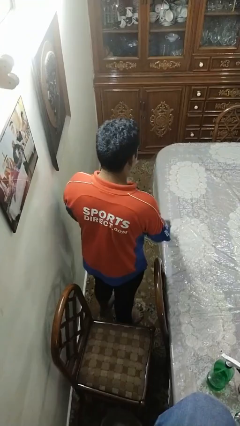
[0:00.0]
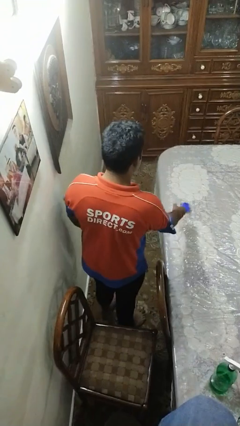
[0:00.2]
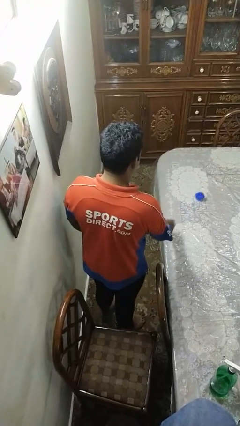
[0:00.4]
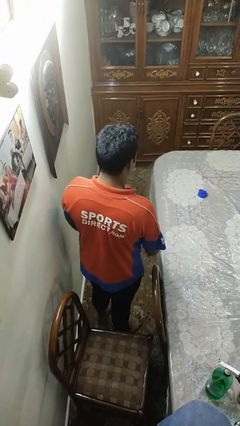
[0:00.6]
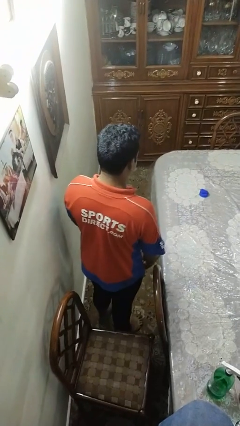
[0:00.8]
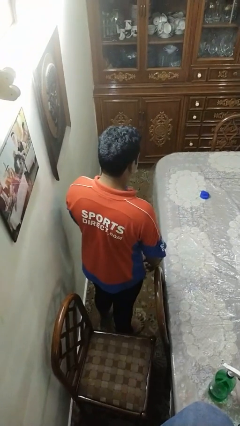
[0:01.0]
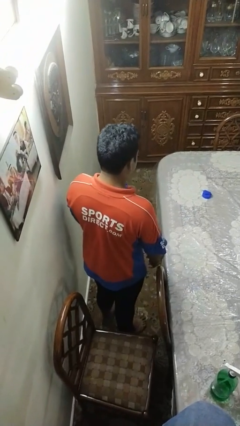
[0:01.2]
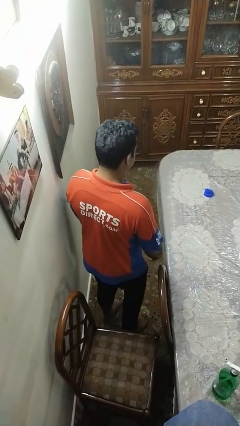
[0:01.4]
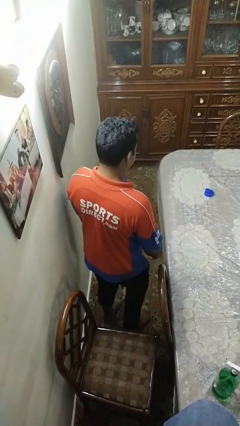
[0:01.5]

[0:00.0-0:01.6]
person throws object on table

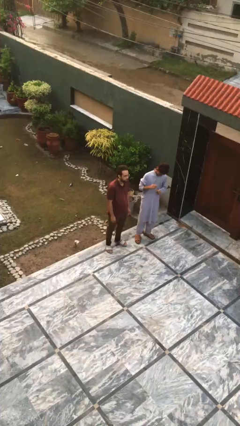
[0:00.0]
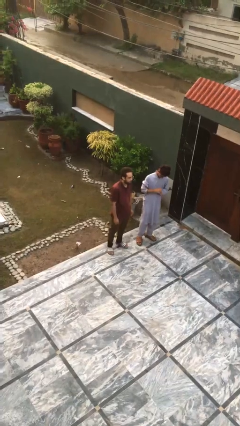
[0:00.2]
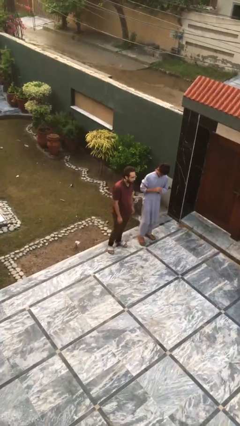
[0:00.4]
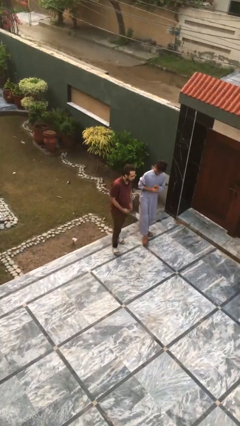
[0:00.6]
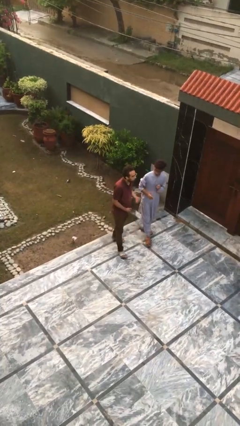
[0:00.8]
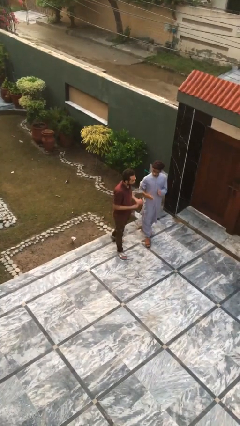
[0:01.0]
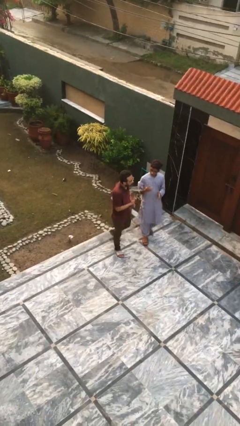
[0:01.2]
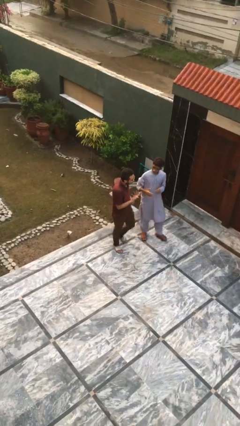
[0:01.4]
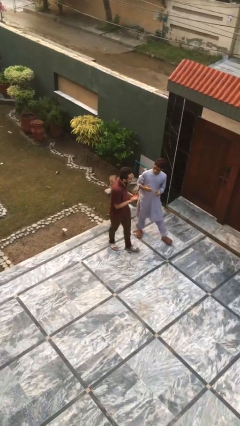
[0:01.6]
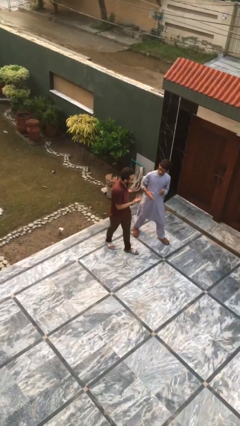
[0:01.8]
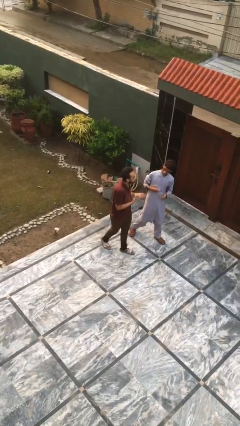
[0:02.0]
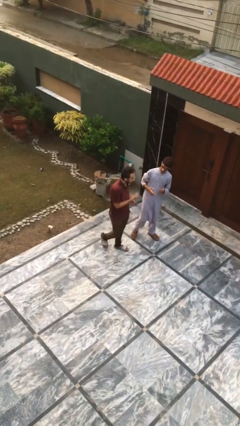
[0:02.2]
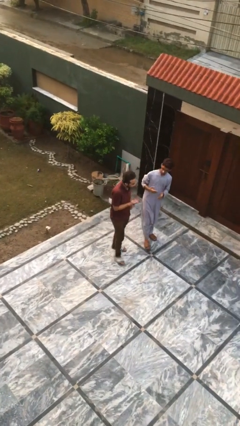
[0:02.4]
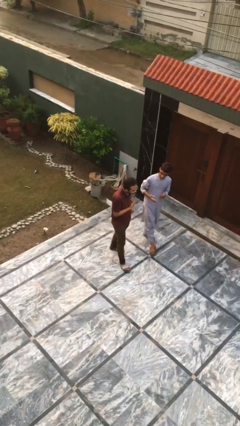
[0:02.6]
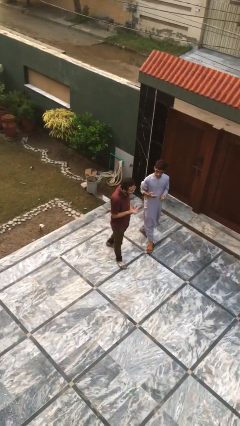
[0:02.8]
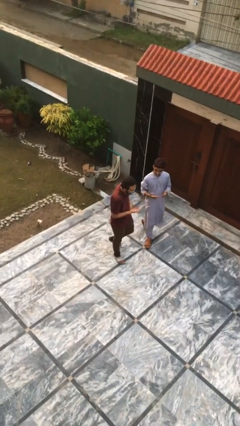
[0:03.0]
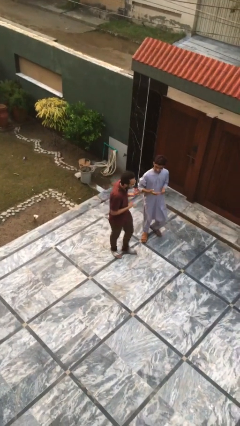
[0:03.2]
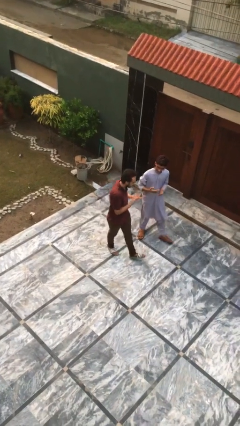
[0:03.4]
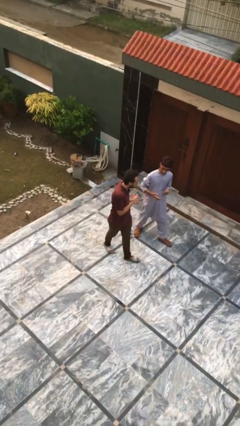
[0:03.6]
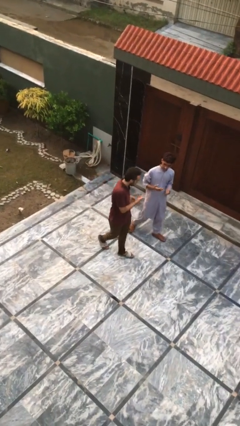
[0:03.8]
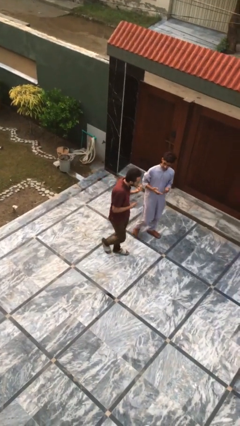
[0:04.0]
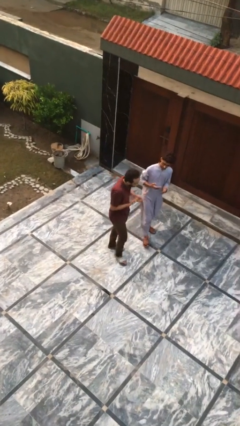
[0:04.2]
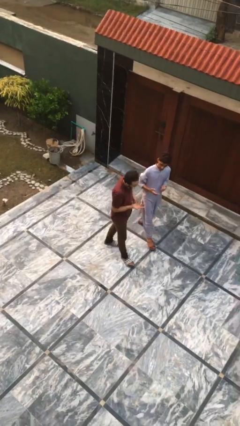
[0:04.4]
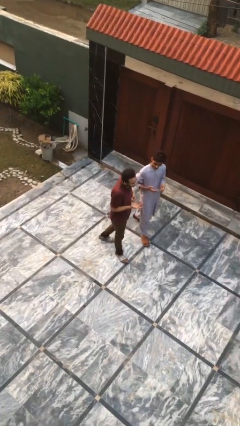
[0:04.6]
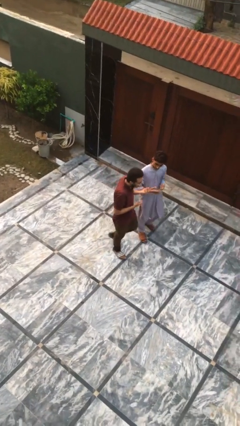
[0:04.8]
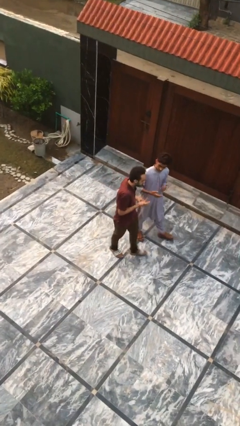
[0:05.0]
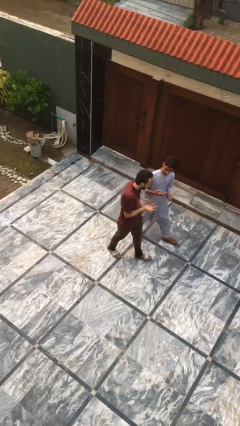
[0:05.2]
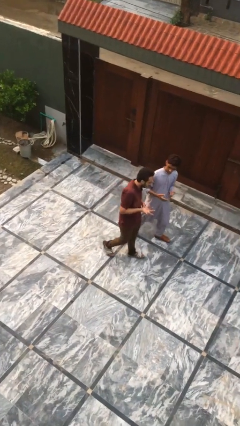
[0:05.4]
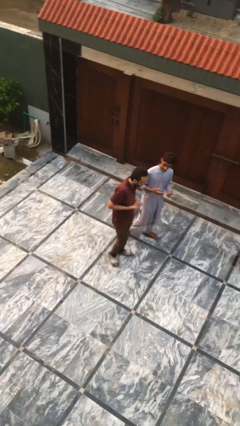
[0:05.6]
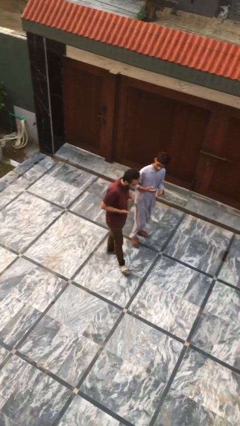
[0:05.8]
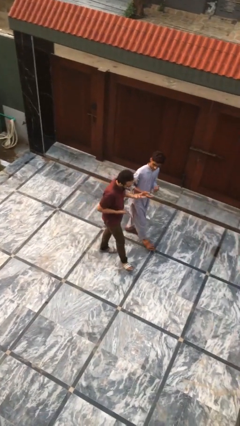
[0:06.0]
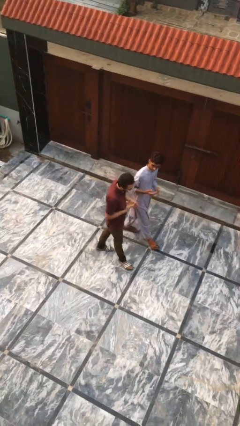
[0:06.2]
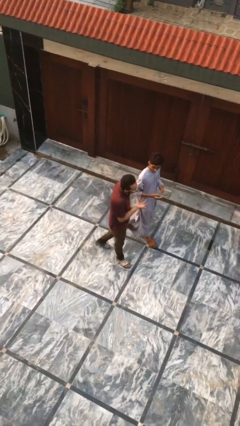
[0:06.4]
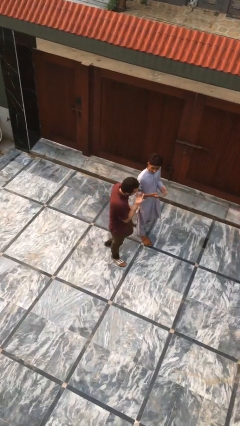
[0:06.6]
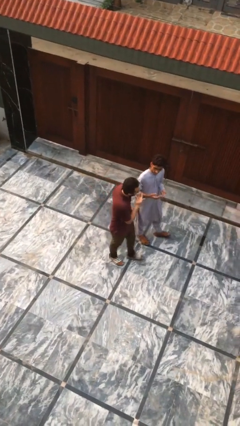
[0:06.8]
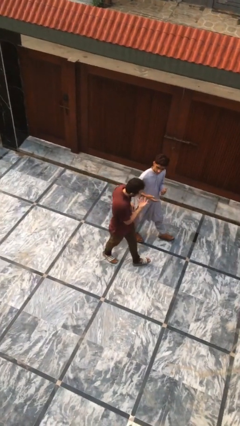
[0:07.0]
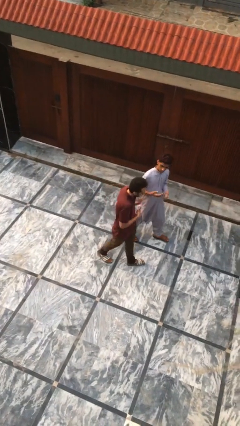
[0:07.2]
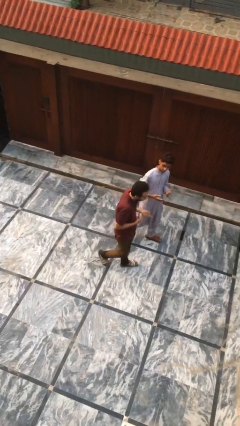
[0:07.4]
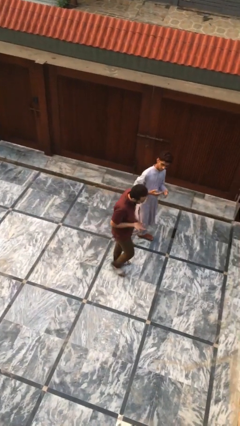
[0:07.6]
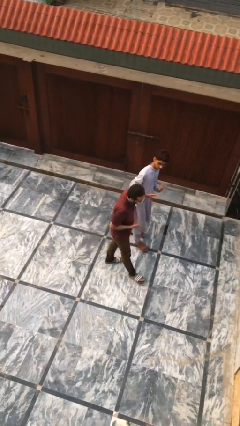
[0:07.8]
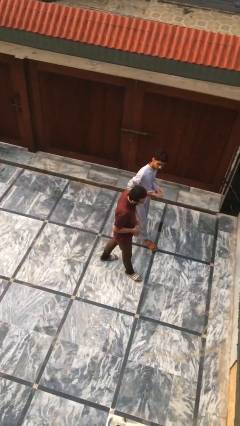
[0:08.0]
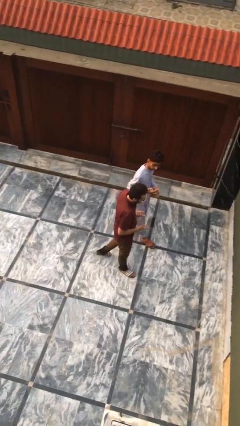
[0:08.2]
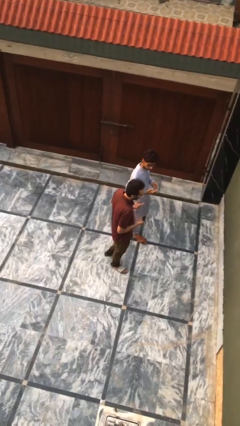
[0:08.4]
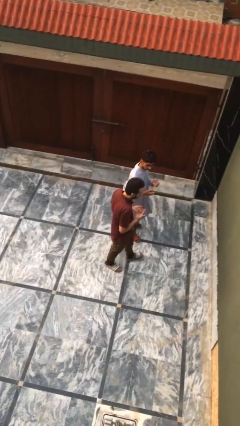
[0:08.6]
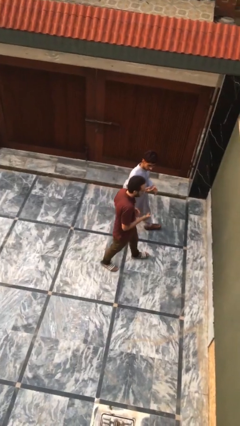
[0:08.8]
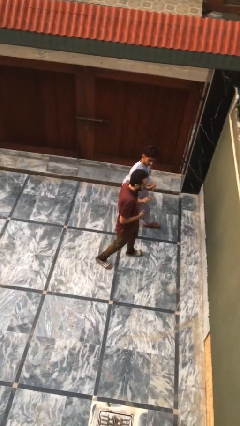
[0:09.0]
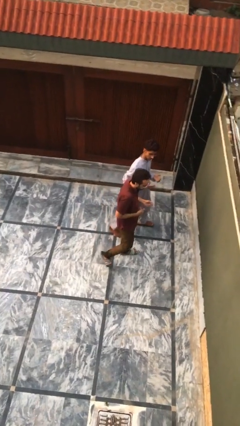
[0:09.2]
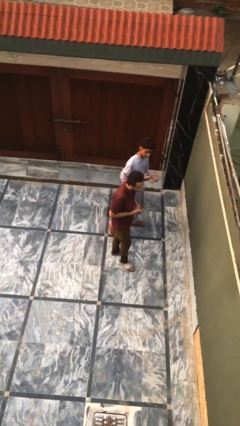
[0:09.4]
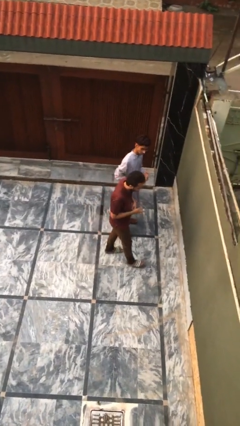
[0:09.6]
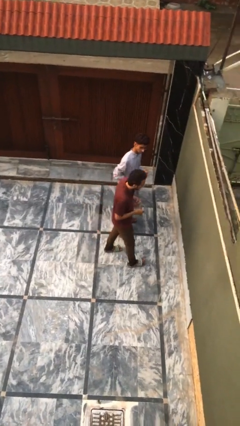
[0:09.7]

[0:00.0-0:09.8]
person talks to person

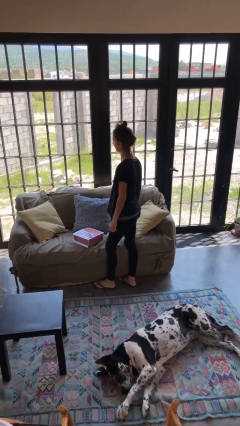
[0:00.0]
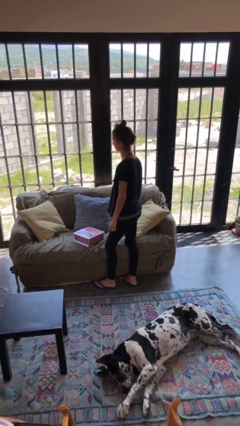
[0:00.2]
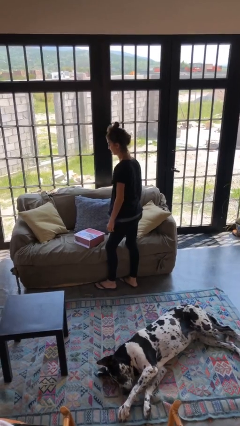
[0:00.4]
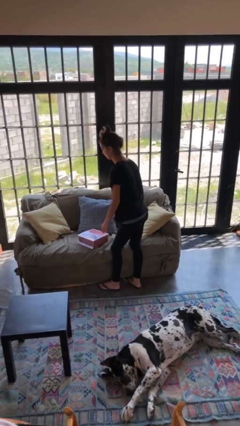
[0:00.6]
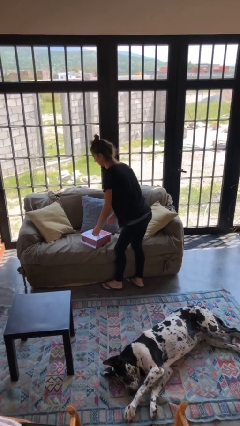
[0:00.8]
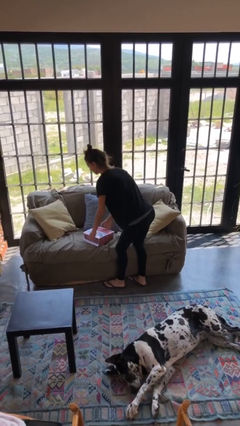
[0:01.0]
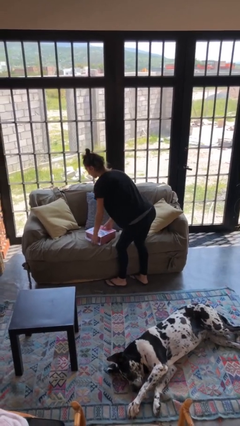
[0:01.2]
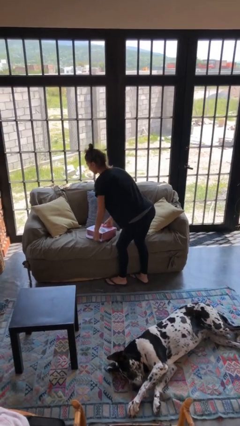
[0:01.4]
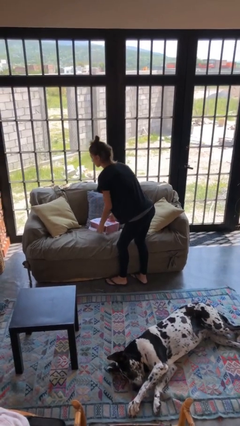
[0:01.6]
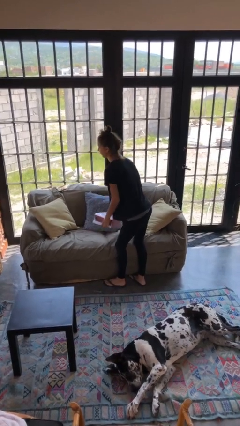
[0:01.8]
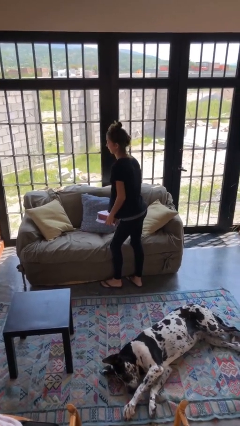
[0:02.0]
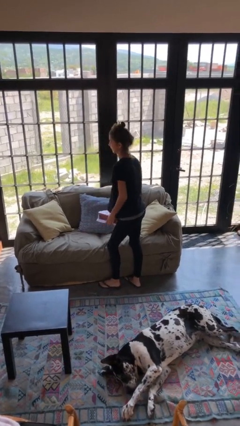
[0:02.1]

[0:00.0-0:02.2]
person picks up object from couch

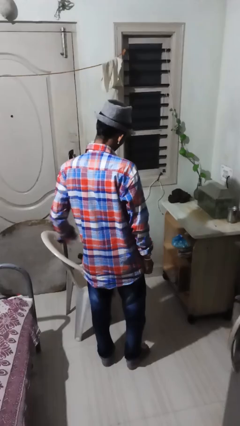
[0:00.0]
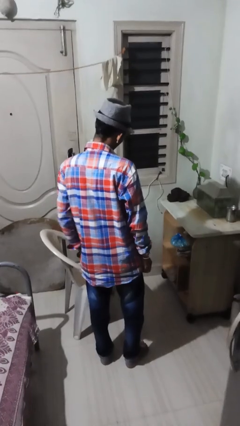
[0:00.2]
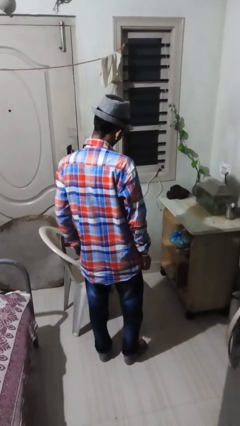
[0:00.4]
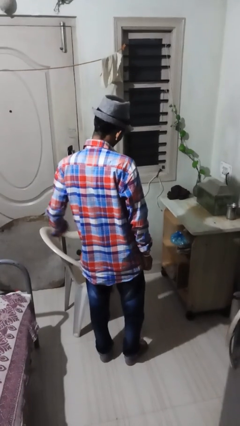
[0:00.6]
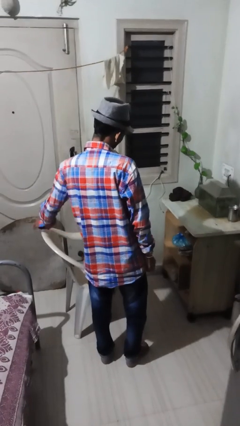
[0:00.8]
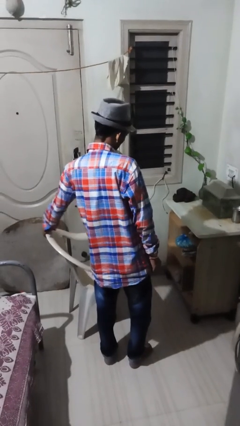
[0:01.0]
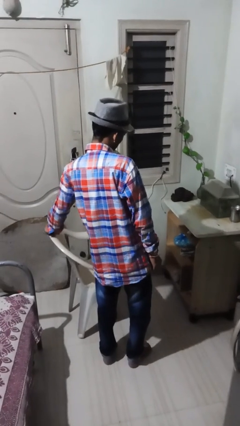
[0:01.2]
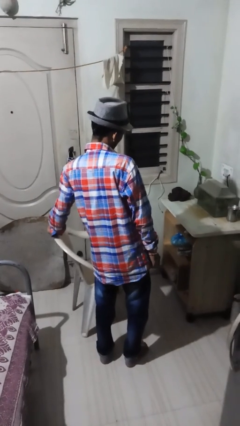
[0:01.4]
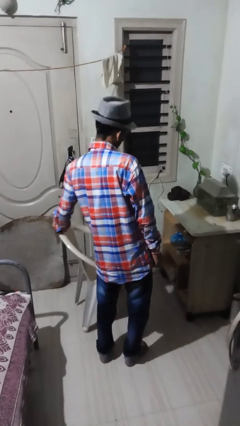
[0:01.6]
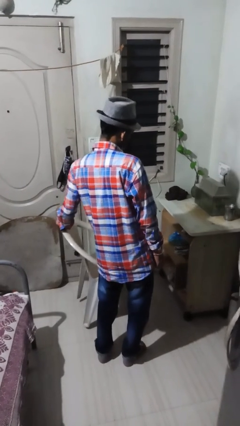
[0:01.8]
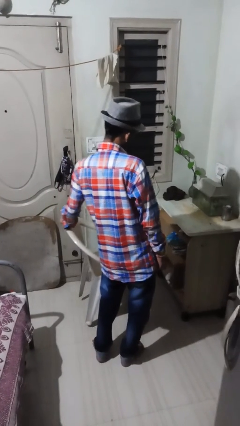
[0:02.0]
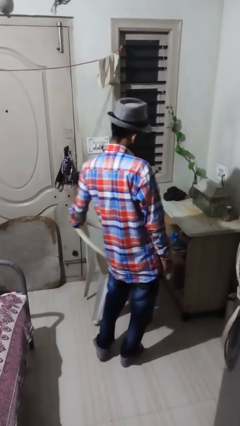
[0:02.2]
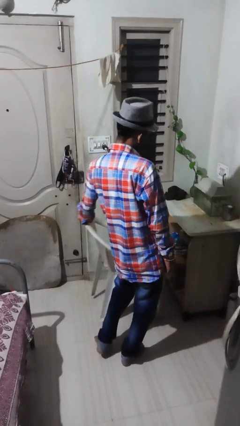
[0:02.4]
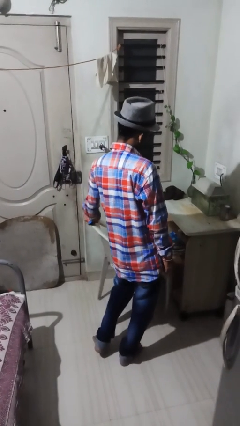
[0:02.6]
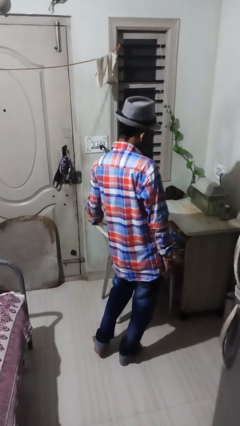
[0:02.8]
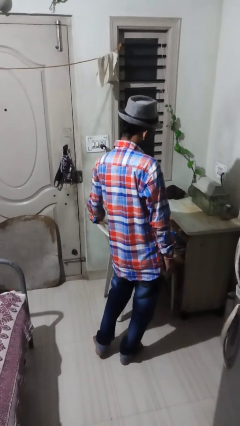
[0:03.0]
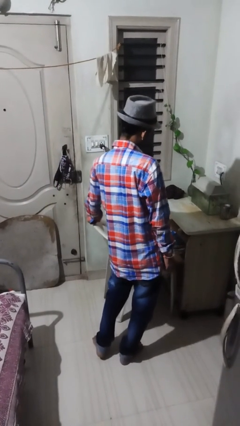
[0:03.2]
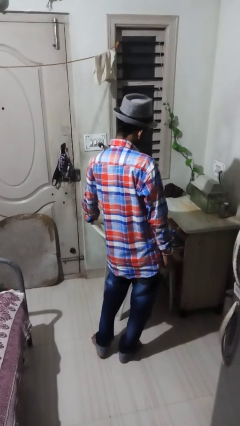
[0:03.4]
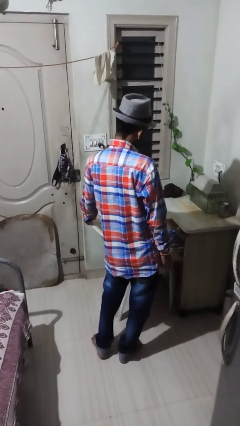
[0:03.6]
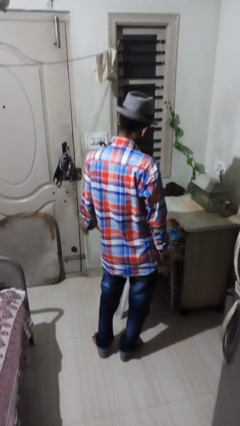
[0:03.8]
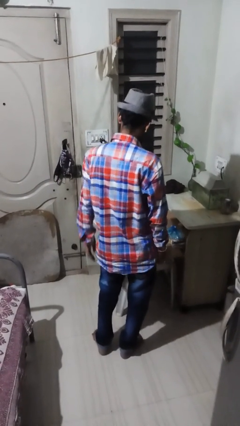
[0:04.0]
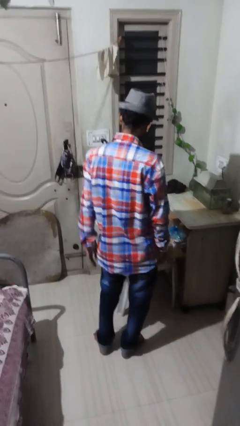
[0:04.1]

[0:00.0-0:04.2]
person pushes in chair
